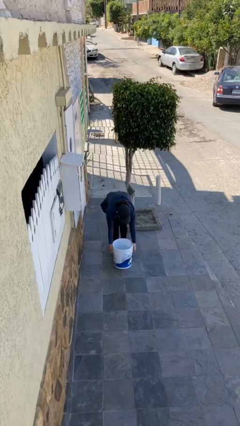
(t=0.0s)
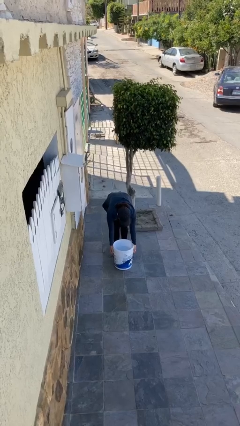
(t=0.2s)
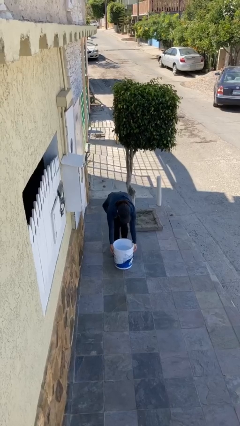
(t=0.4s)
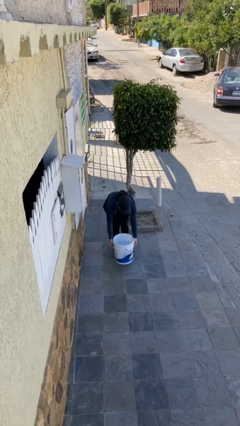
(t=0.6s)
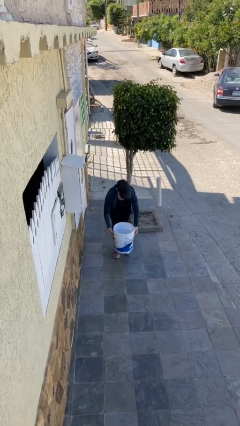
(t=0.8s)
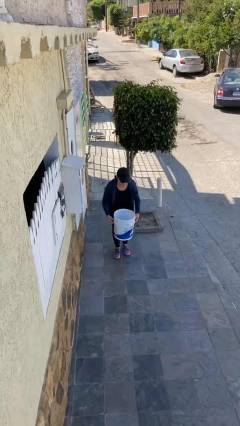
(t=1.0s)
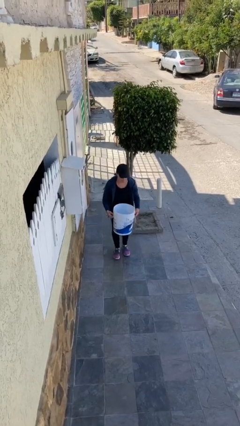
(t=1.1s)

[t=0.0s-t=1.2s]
person picks up object from floor

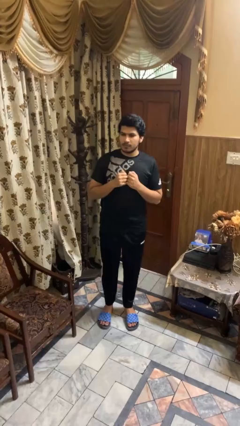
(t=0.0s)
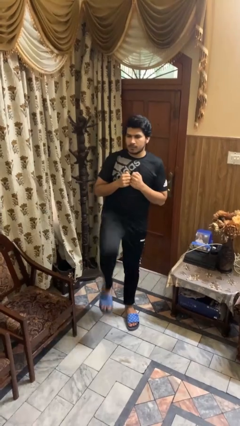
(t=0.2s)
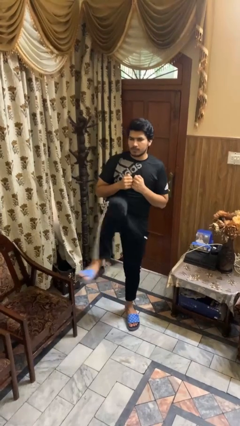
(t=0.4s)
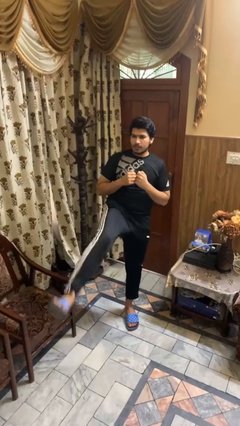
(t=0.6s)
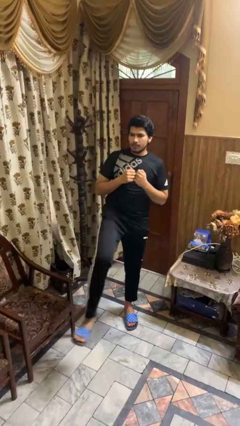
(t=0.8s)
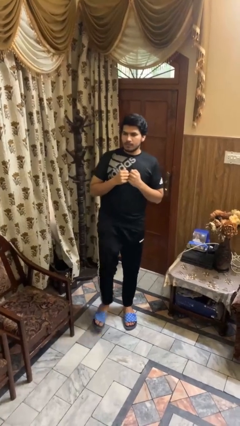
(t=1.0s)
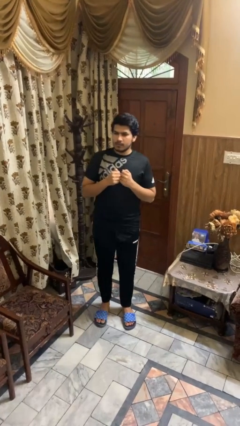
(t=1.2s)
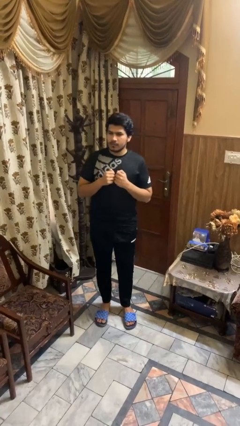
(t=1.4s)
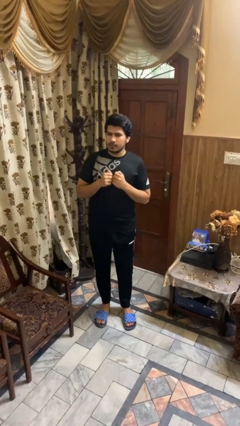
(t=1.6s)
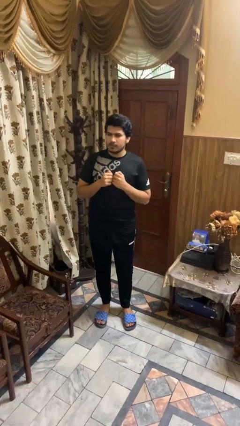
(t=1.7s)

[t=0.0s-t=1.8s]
person karate kicks

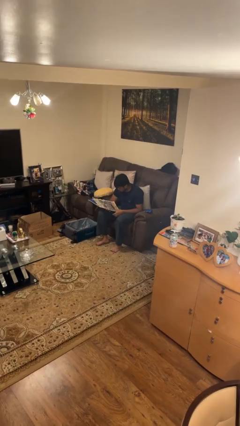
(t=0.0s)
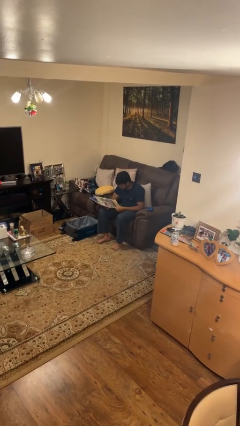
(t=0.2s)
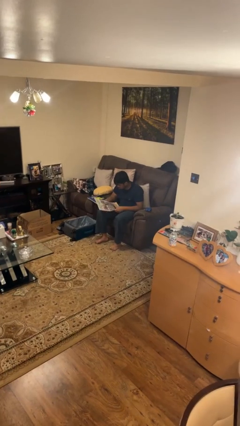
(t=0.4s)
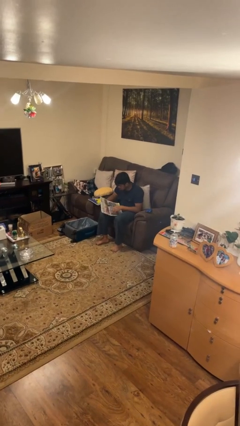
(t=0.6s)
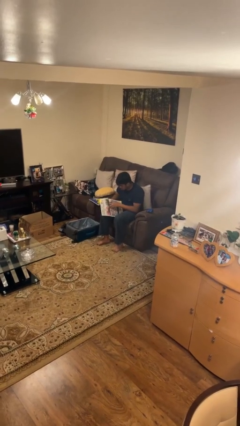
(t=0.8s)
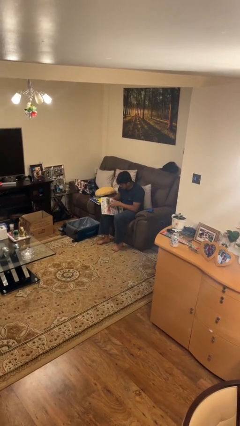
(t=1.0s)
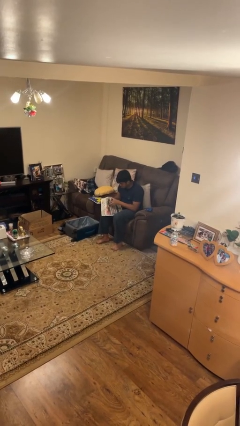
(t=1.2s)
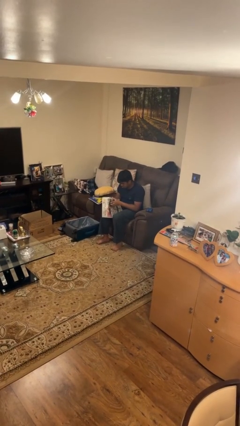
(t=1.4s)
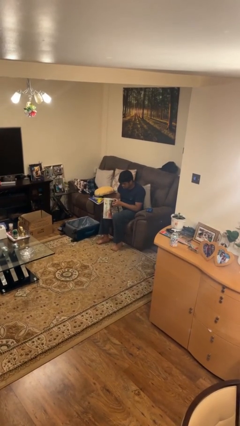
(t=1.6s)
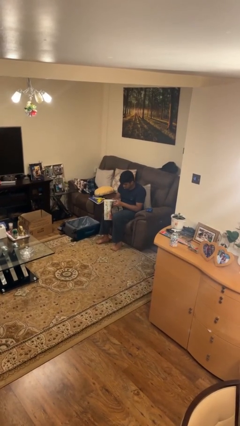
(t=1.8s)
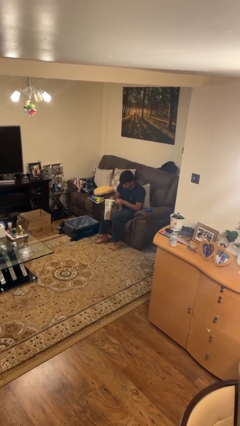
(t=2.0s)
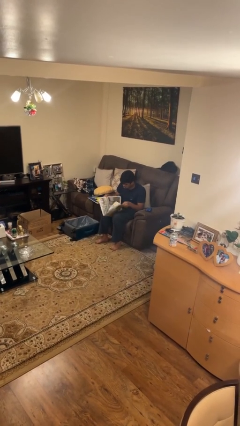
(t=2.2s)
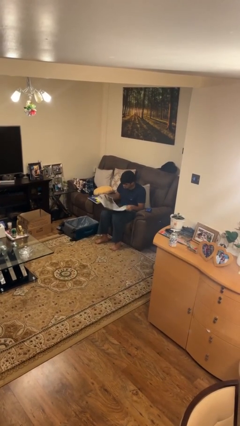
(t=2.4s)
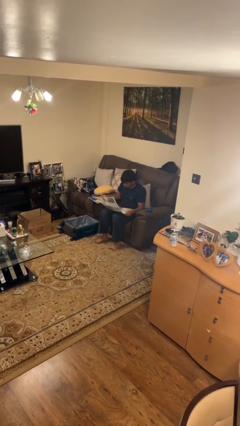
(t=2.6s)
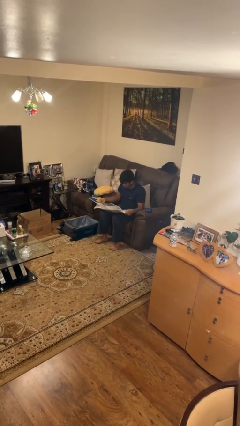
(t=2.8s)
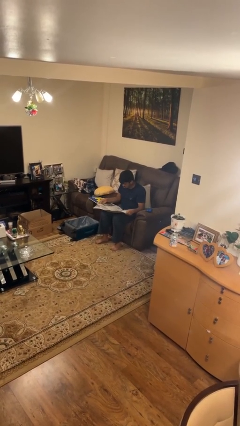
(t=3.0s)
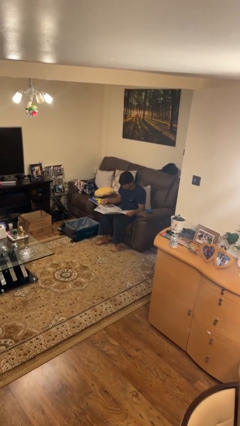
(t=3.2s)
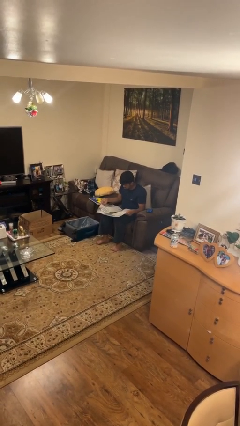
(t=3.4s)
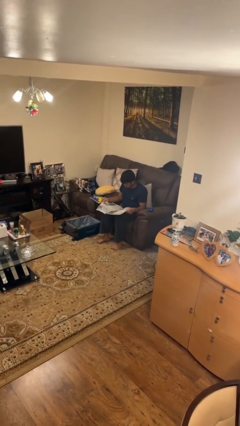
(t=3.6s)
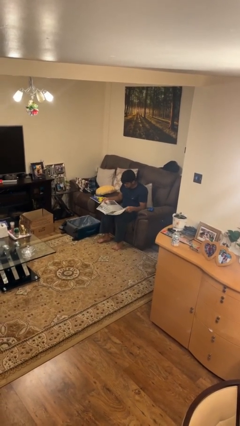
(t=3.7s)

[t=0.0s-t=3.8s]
person reads newspaper

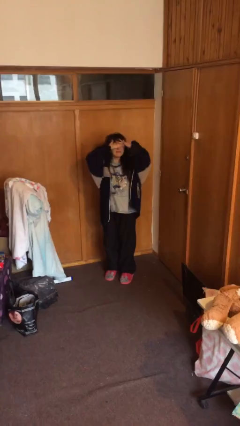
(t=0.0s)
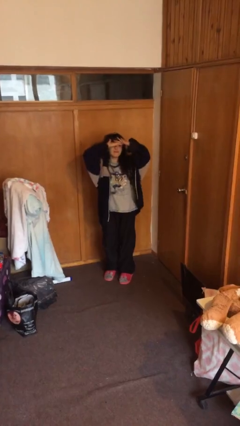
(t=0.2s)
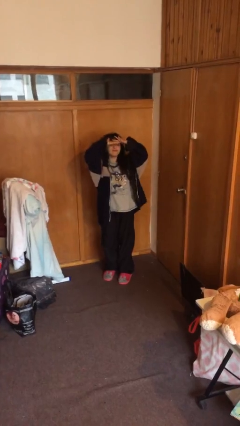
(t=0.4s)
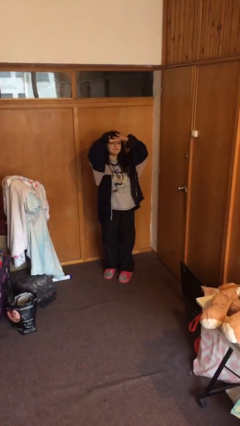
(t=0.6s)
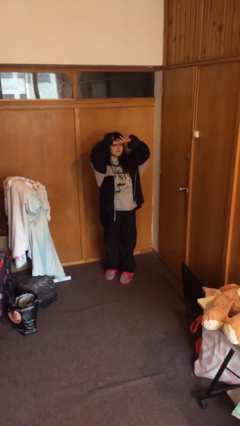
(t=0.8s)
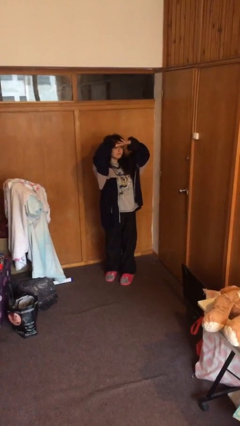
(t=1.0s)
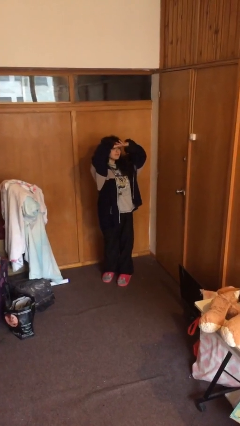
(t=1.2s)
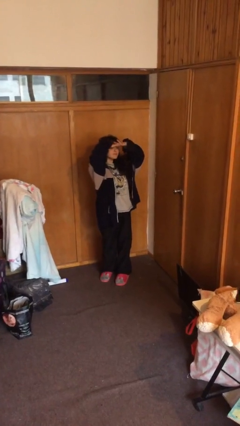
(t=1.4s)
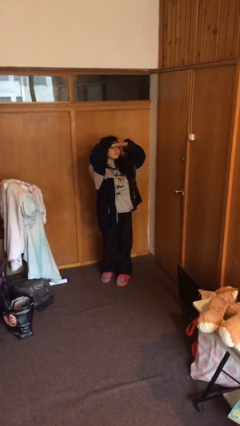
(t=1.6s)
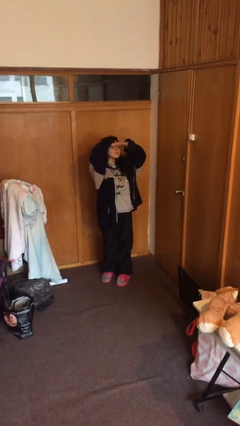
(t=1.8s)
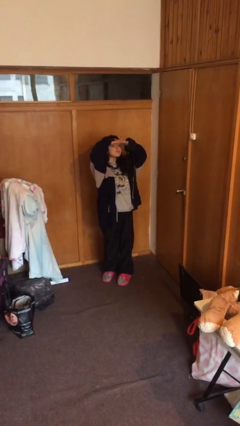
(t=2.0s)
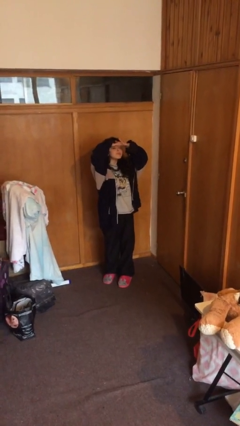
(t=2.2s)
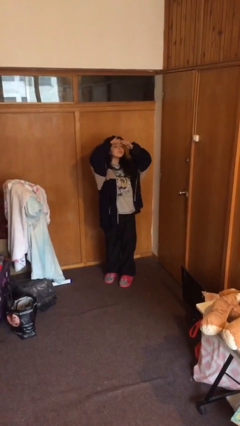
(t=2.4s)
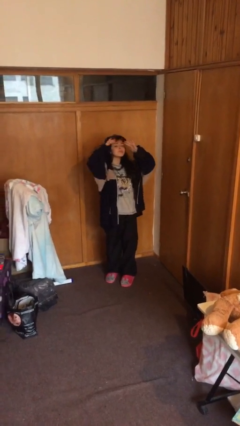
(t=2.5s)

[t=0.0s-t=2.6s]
person shades eyes

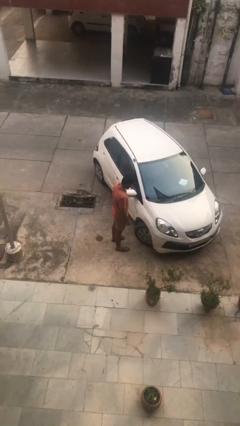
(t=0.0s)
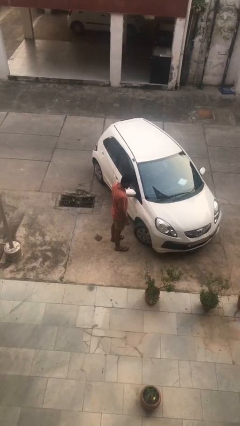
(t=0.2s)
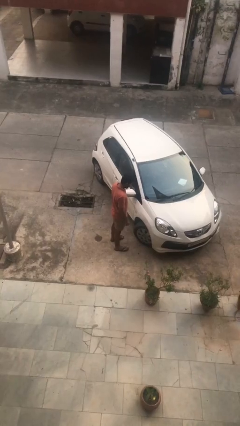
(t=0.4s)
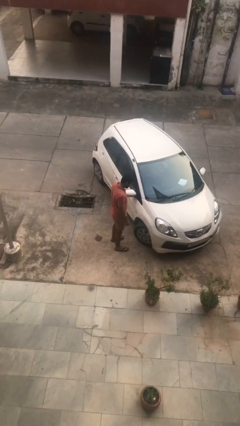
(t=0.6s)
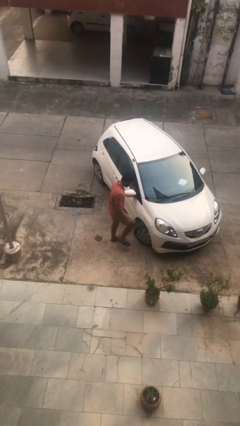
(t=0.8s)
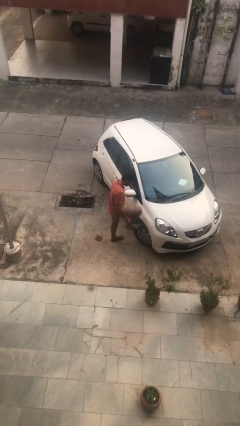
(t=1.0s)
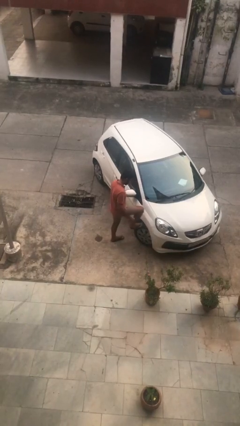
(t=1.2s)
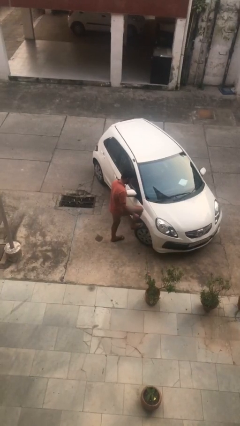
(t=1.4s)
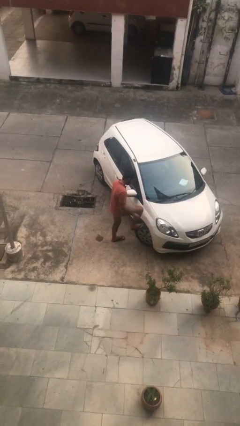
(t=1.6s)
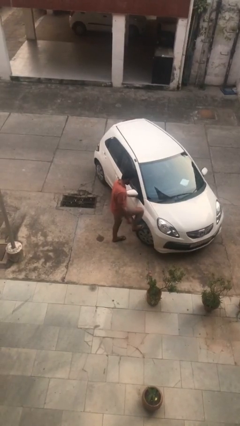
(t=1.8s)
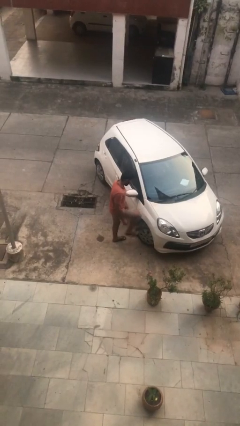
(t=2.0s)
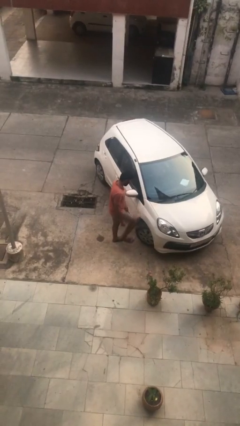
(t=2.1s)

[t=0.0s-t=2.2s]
person kicks car tires

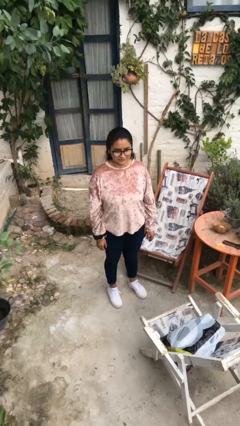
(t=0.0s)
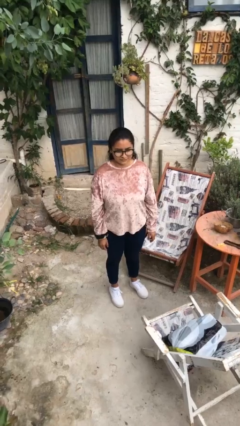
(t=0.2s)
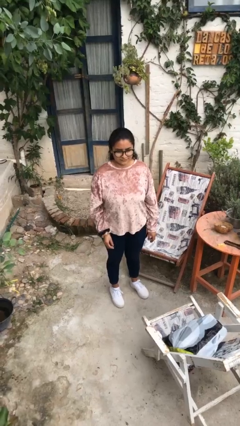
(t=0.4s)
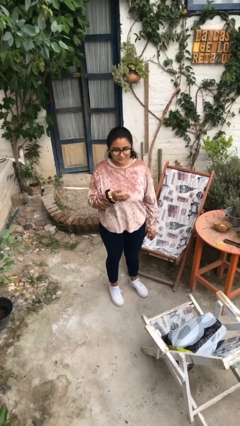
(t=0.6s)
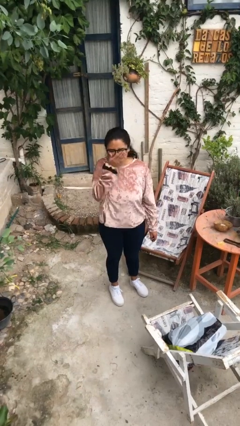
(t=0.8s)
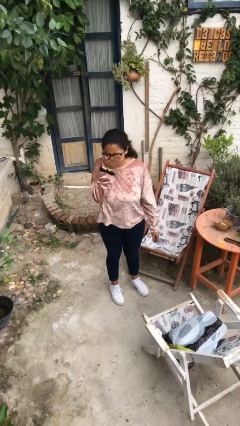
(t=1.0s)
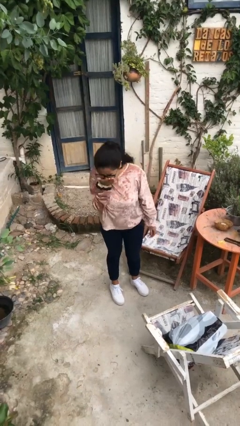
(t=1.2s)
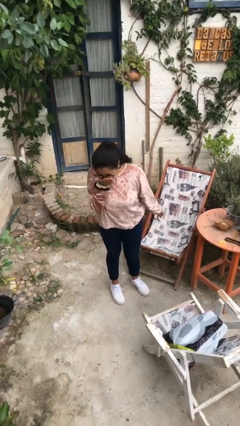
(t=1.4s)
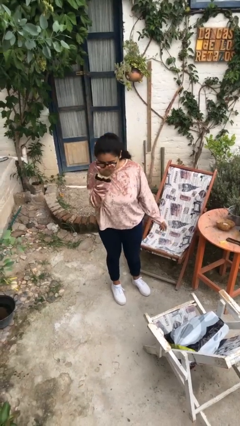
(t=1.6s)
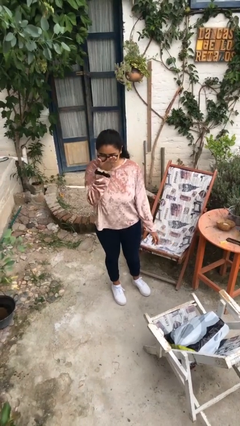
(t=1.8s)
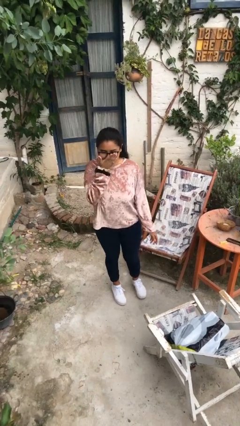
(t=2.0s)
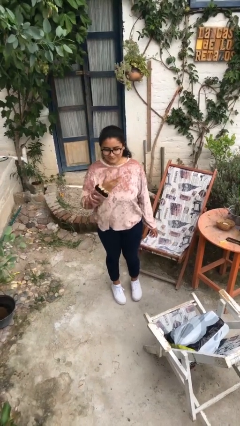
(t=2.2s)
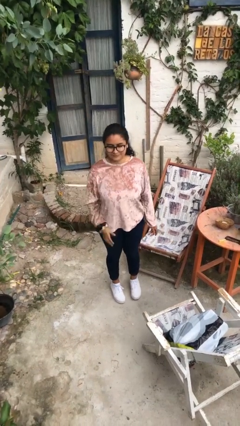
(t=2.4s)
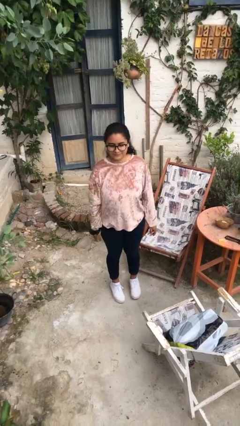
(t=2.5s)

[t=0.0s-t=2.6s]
person sneezes into hand

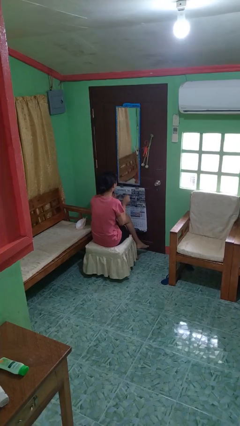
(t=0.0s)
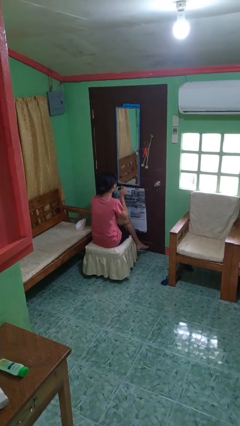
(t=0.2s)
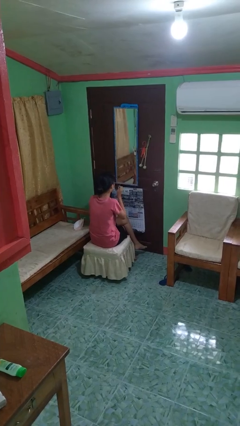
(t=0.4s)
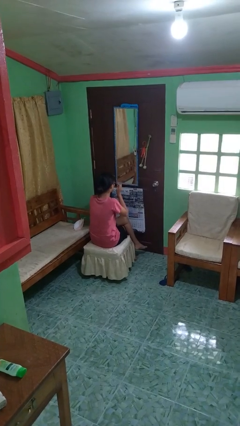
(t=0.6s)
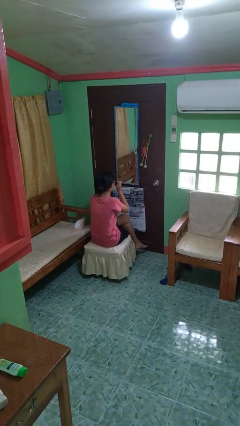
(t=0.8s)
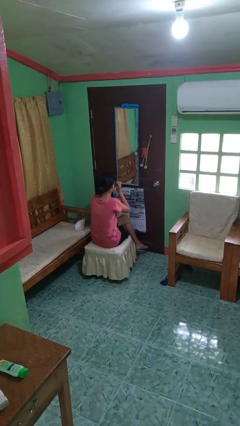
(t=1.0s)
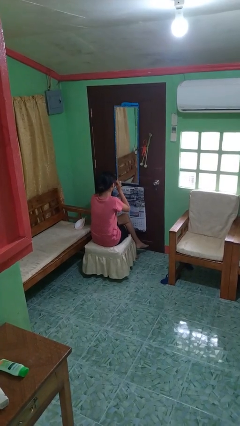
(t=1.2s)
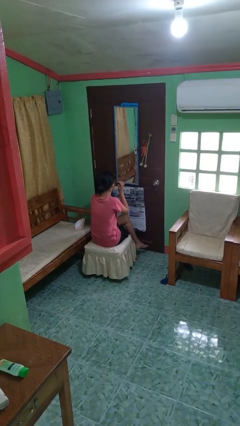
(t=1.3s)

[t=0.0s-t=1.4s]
person puts on sunglasses

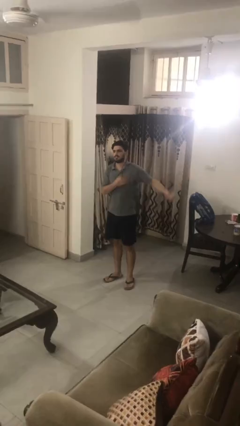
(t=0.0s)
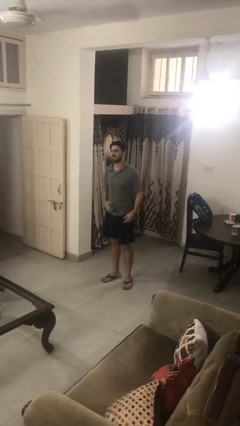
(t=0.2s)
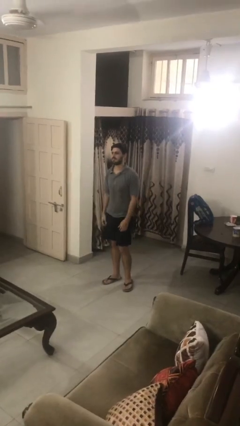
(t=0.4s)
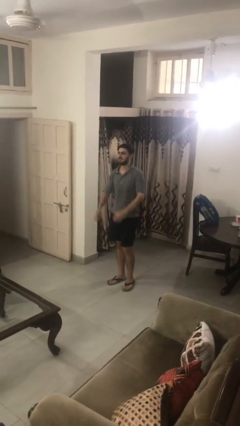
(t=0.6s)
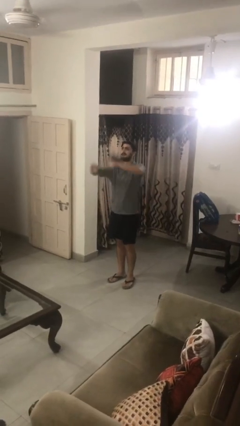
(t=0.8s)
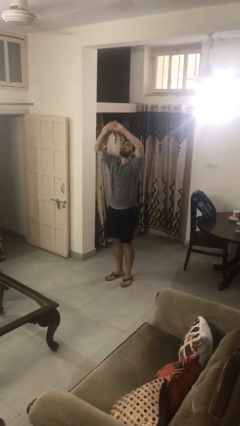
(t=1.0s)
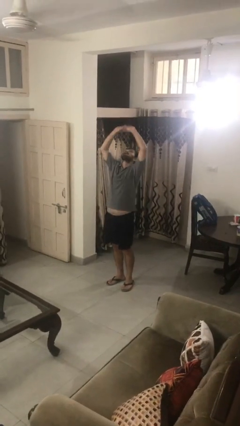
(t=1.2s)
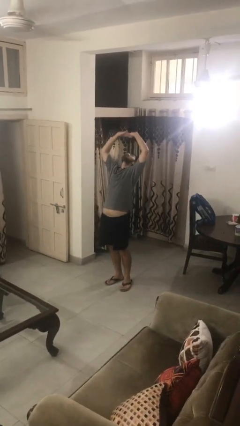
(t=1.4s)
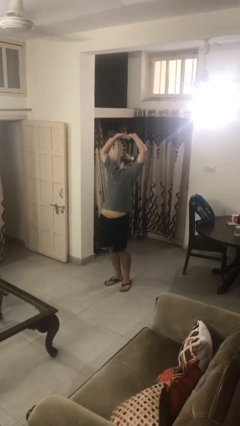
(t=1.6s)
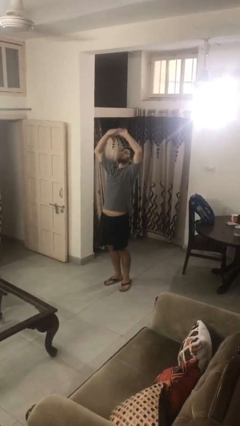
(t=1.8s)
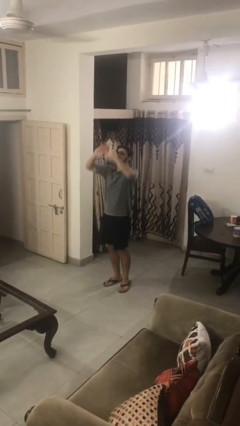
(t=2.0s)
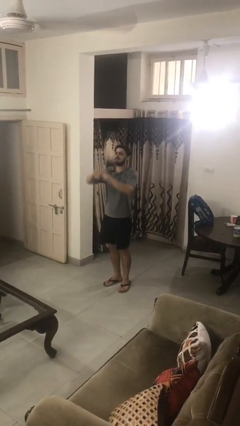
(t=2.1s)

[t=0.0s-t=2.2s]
person stretches arms over head
